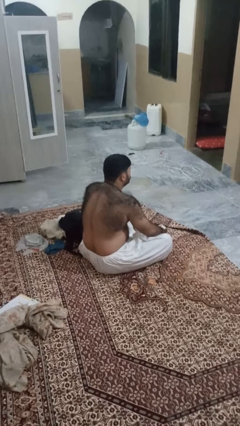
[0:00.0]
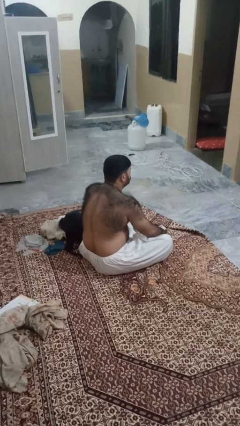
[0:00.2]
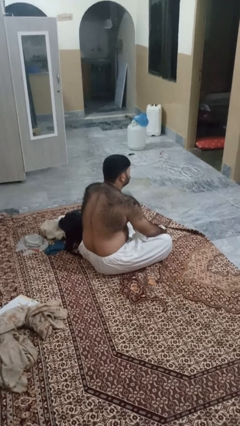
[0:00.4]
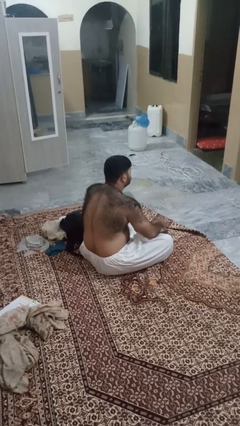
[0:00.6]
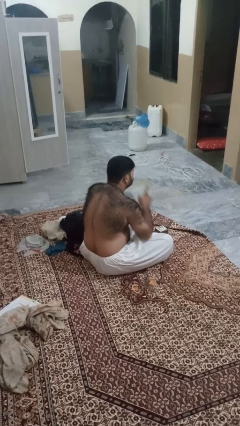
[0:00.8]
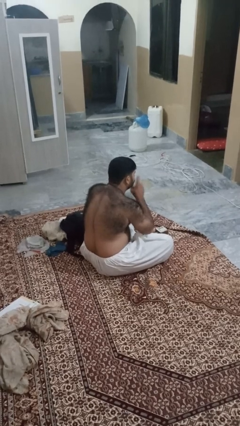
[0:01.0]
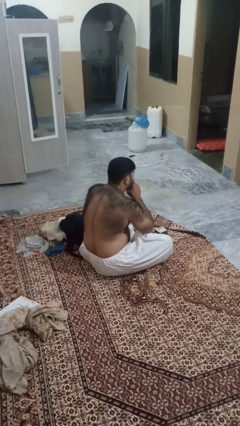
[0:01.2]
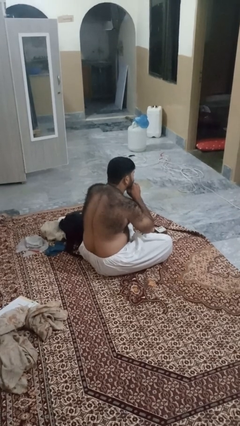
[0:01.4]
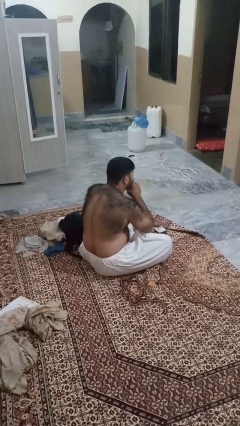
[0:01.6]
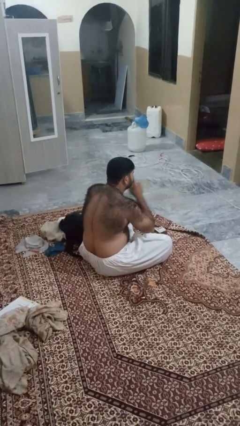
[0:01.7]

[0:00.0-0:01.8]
person gestures be quiet

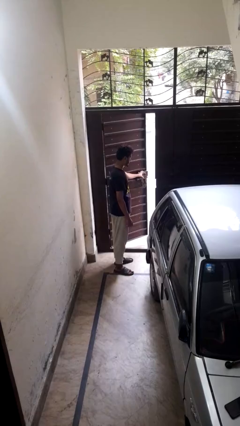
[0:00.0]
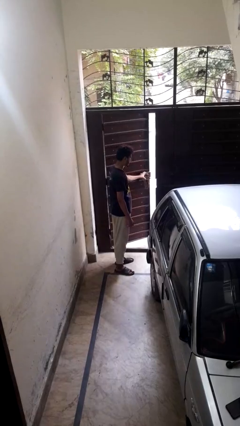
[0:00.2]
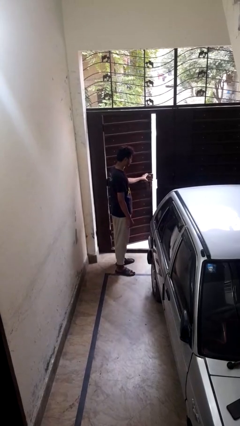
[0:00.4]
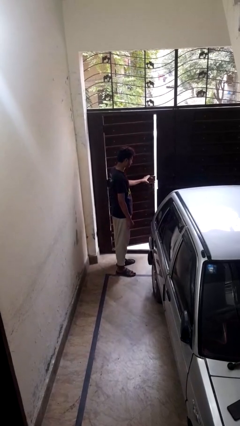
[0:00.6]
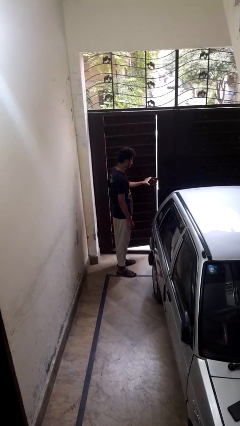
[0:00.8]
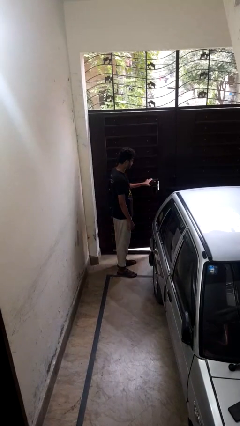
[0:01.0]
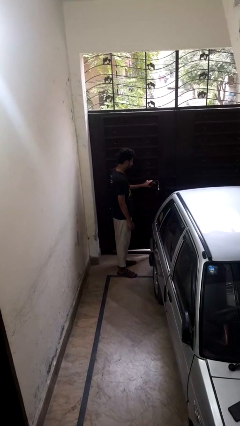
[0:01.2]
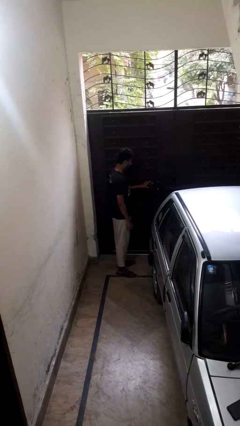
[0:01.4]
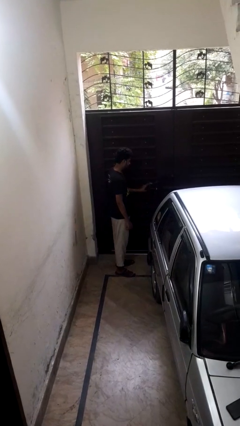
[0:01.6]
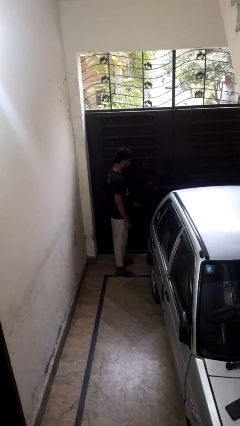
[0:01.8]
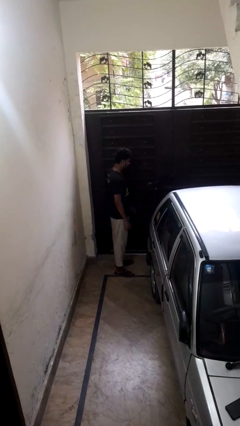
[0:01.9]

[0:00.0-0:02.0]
person closes gate

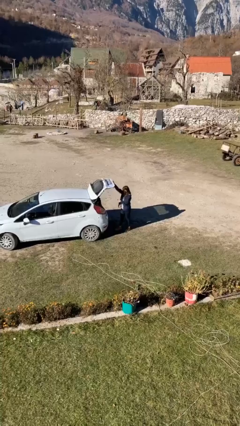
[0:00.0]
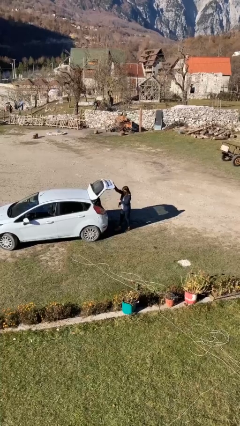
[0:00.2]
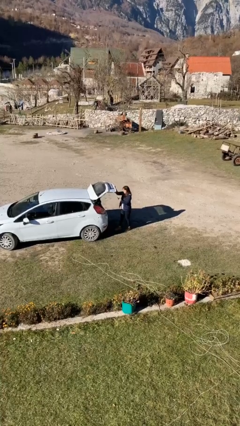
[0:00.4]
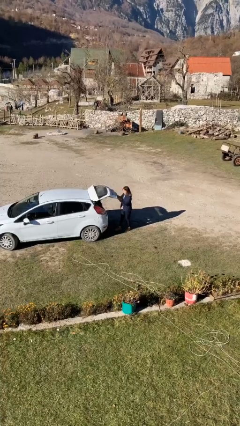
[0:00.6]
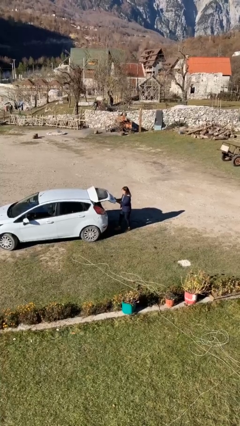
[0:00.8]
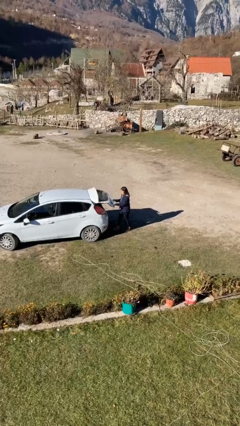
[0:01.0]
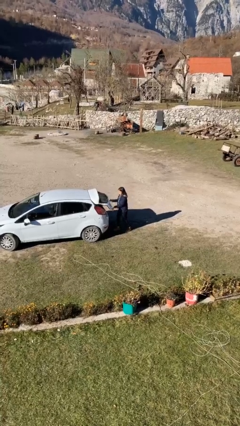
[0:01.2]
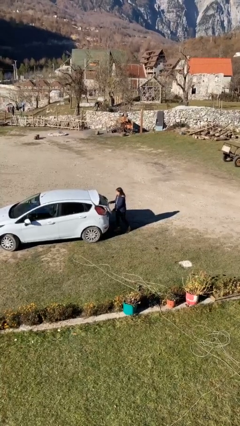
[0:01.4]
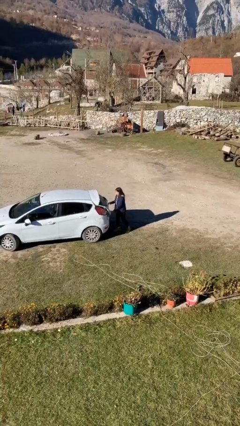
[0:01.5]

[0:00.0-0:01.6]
person closes car trunk

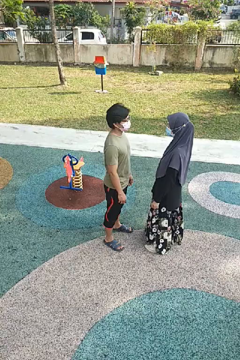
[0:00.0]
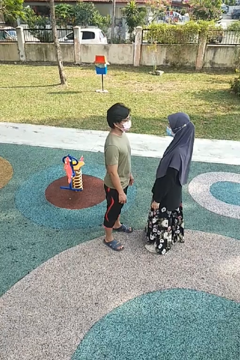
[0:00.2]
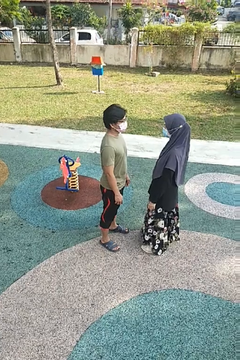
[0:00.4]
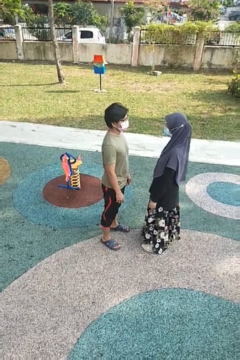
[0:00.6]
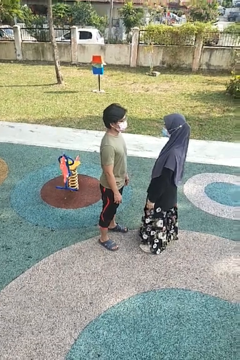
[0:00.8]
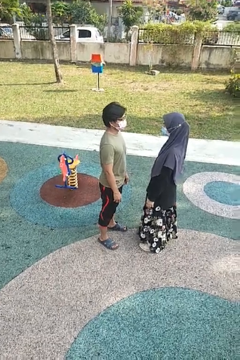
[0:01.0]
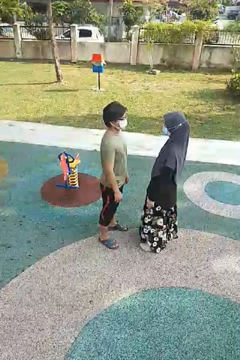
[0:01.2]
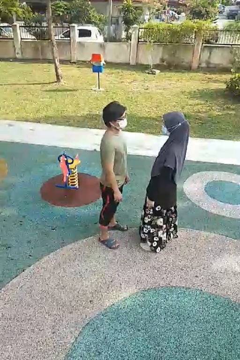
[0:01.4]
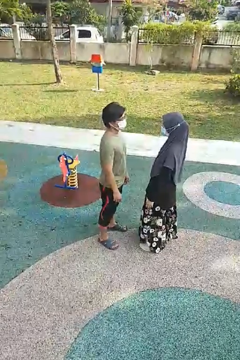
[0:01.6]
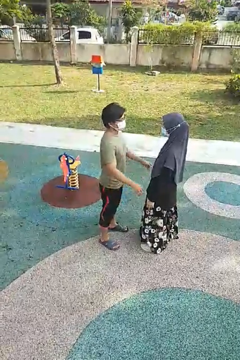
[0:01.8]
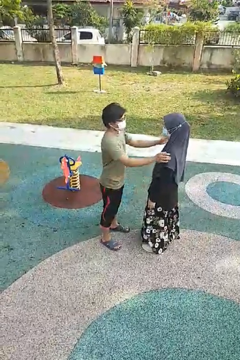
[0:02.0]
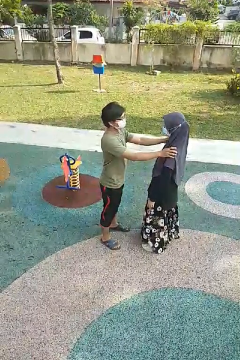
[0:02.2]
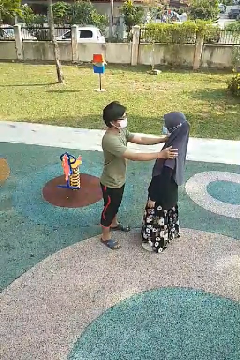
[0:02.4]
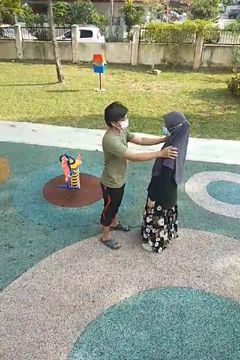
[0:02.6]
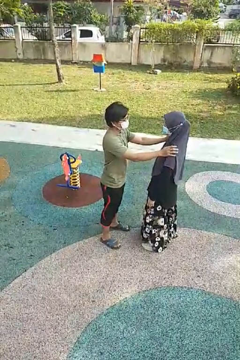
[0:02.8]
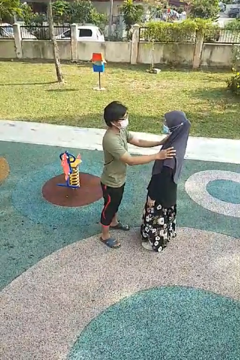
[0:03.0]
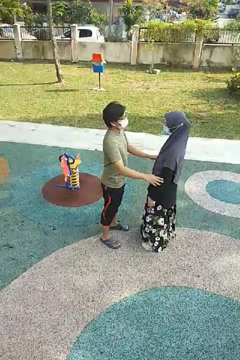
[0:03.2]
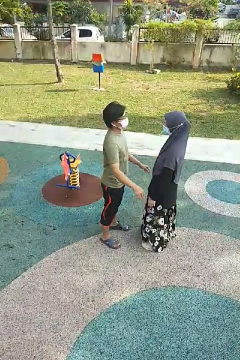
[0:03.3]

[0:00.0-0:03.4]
person pounds shoulders of person

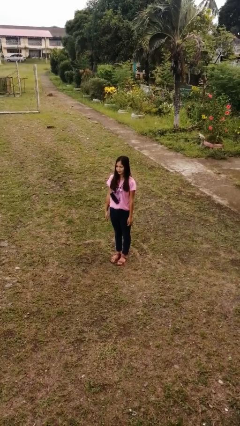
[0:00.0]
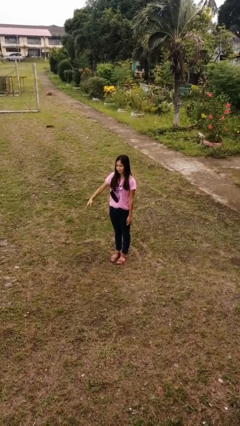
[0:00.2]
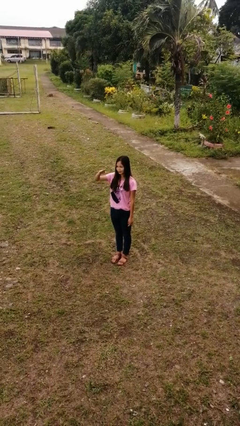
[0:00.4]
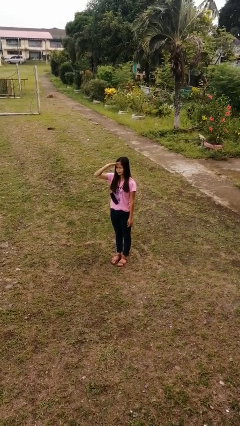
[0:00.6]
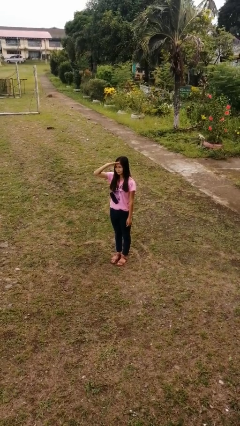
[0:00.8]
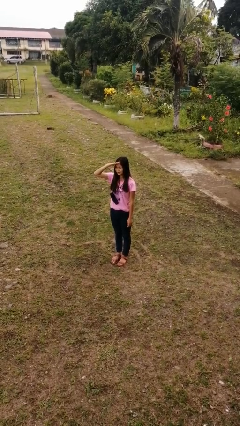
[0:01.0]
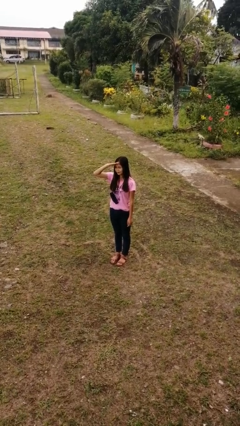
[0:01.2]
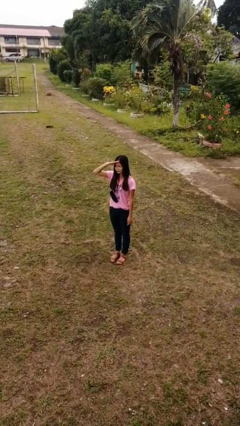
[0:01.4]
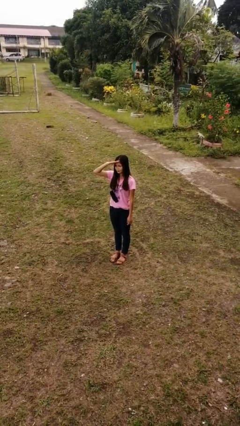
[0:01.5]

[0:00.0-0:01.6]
person salutes

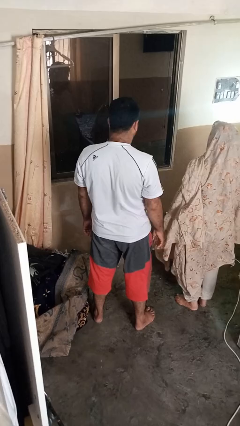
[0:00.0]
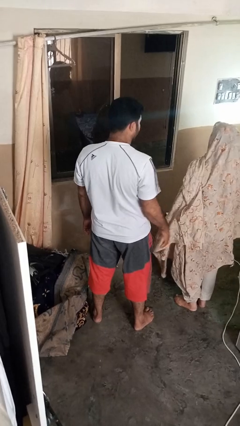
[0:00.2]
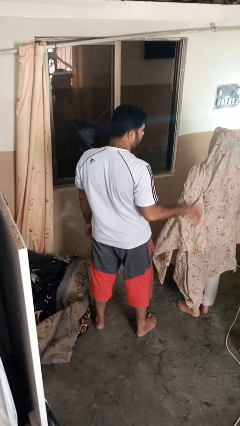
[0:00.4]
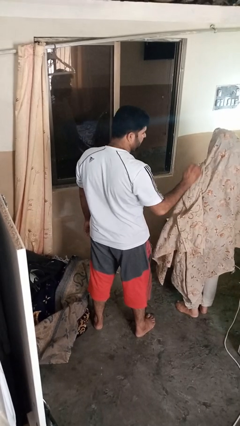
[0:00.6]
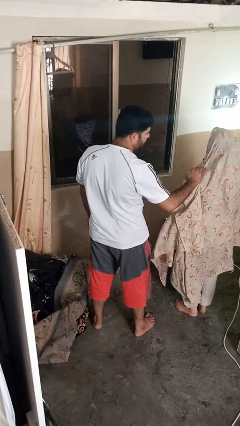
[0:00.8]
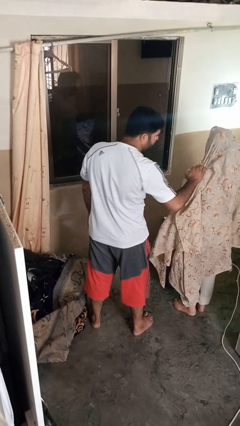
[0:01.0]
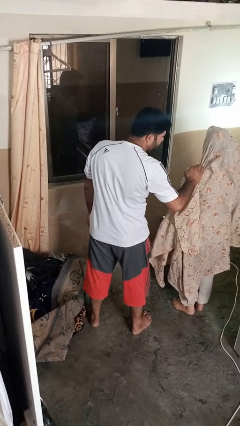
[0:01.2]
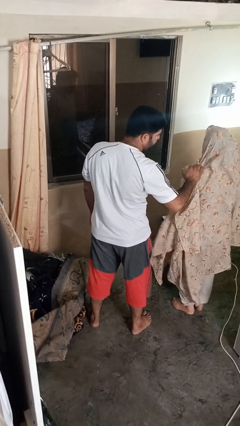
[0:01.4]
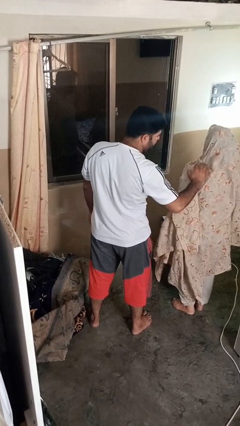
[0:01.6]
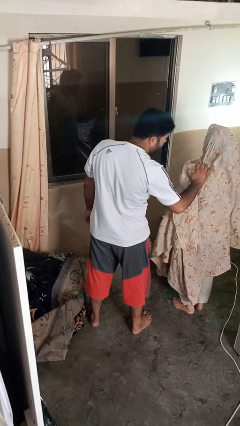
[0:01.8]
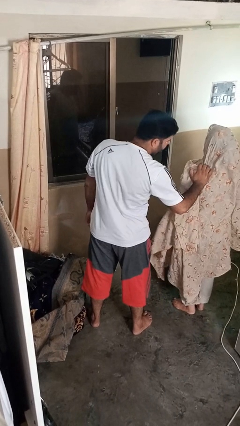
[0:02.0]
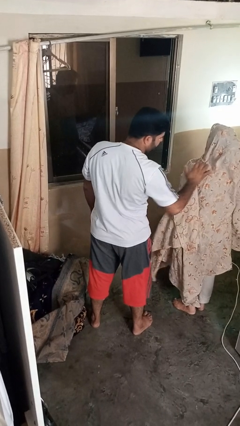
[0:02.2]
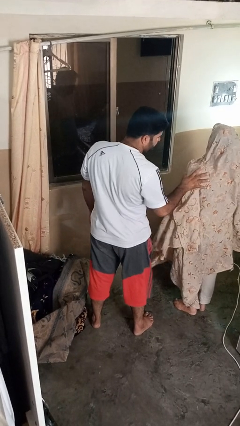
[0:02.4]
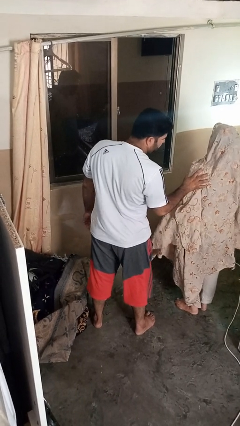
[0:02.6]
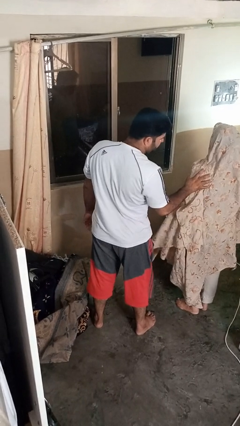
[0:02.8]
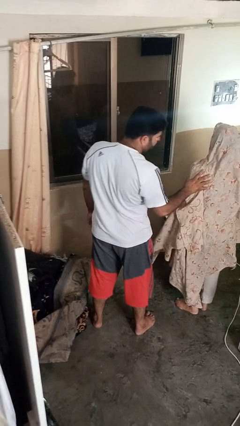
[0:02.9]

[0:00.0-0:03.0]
person grabs person by bicep

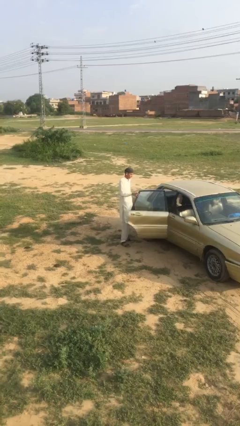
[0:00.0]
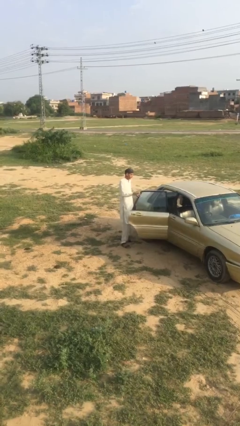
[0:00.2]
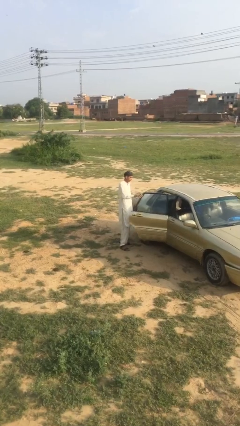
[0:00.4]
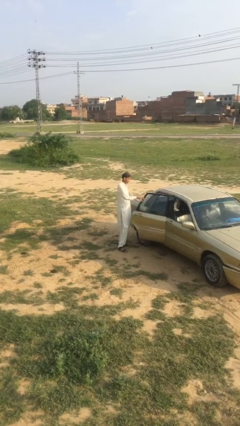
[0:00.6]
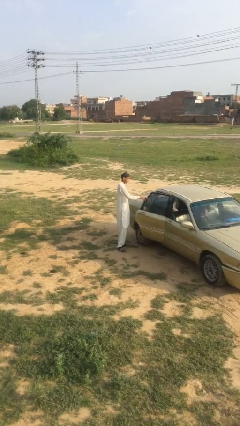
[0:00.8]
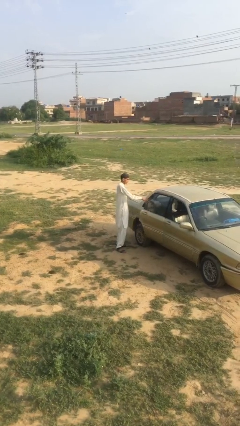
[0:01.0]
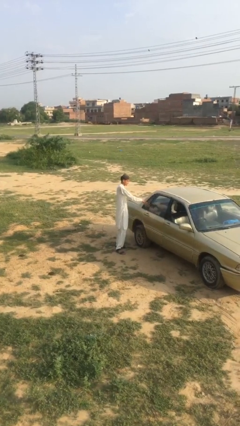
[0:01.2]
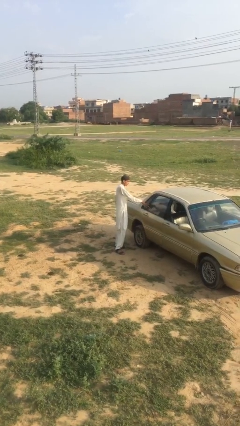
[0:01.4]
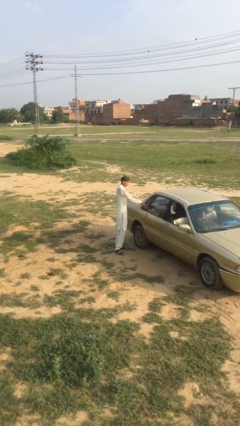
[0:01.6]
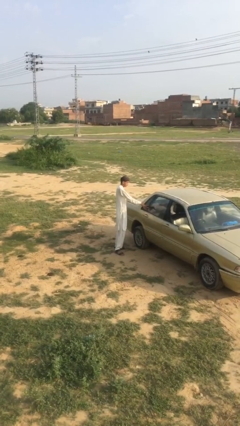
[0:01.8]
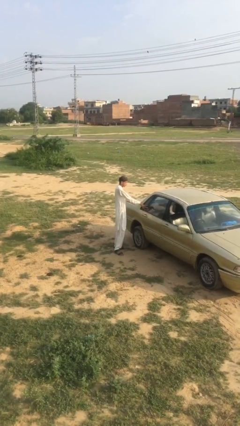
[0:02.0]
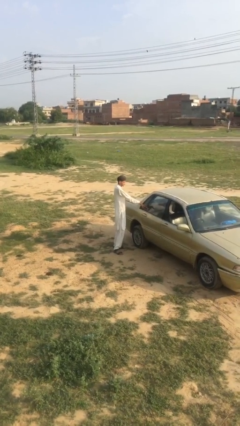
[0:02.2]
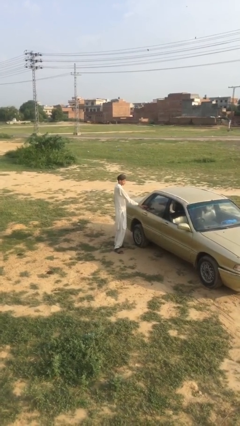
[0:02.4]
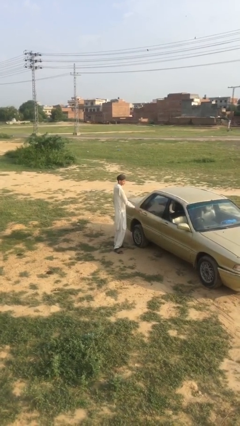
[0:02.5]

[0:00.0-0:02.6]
person closes car door

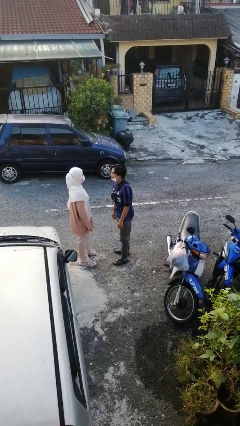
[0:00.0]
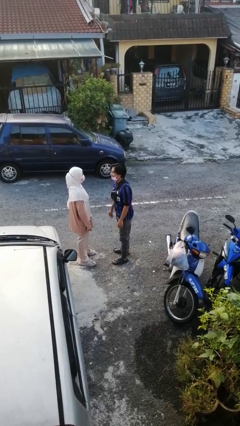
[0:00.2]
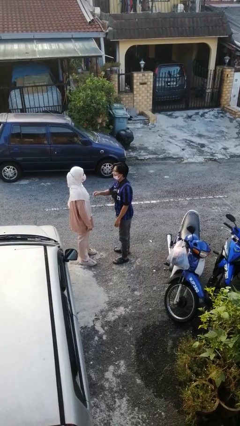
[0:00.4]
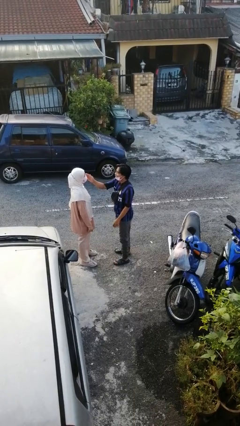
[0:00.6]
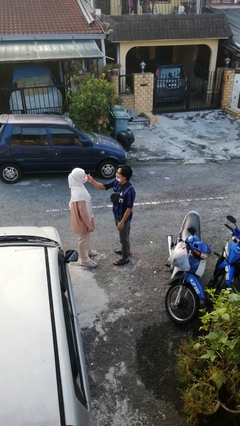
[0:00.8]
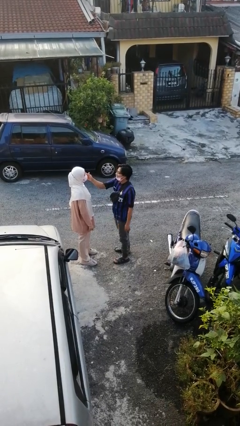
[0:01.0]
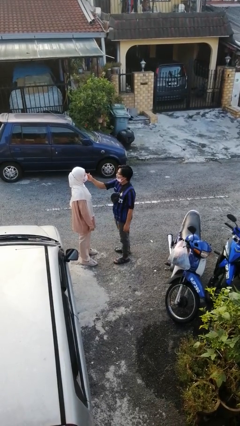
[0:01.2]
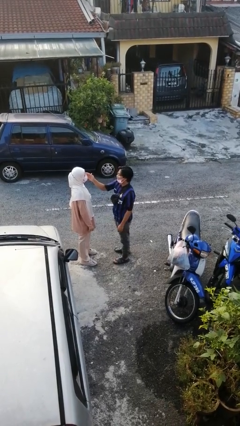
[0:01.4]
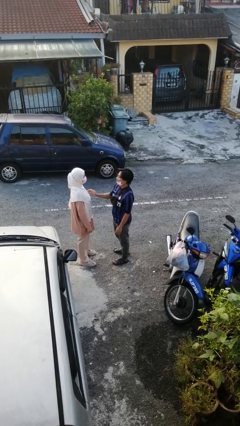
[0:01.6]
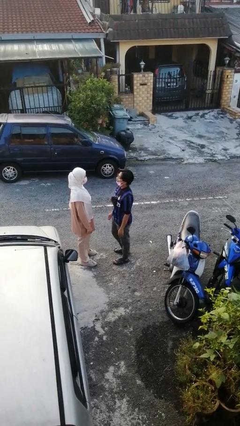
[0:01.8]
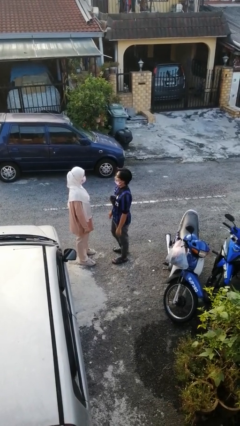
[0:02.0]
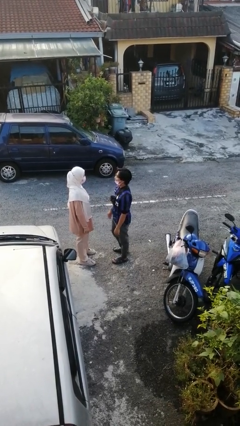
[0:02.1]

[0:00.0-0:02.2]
person touches face of person
